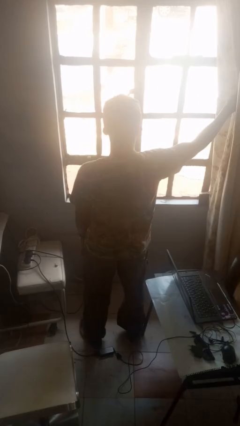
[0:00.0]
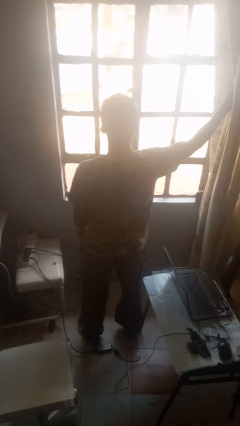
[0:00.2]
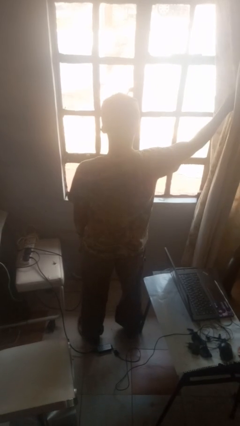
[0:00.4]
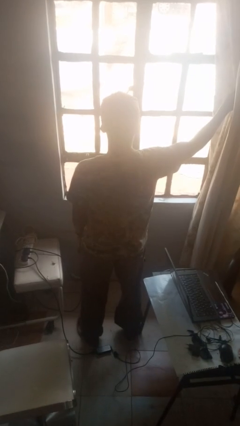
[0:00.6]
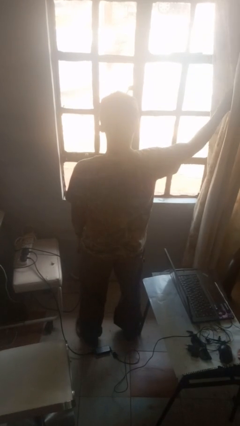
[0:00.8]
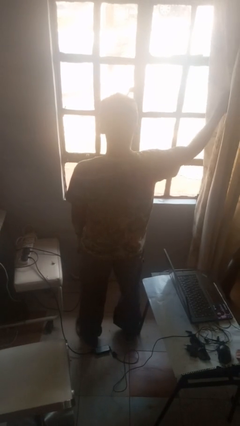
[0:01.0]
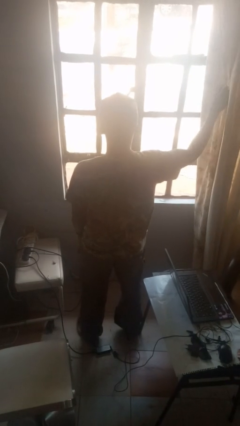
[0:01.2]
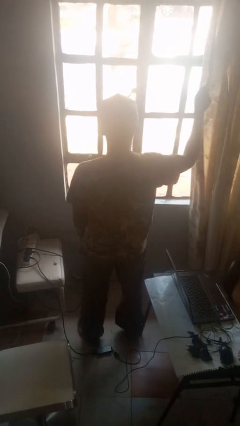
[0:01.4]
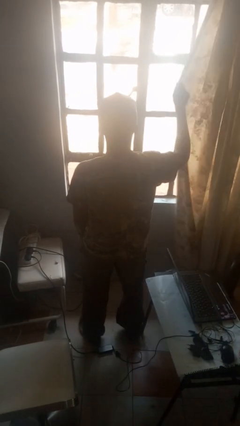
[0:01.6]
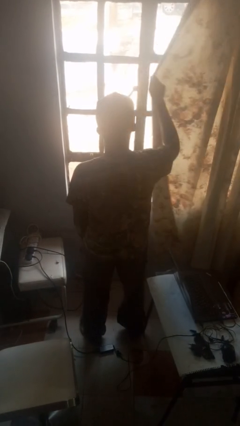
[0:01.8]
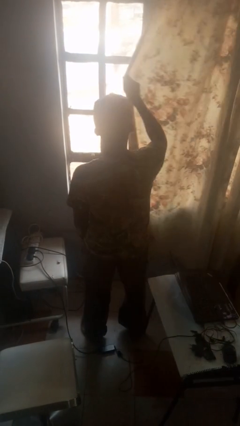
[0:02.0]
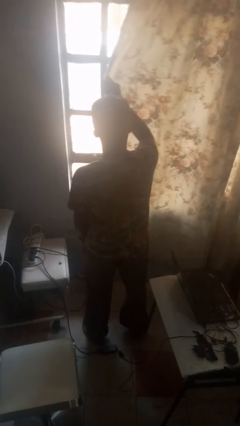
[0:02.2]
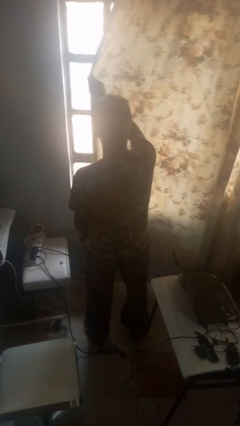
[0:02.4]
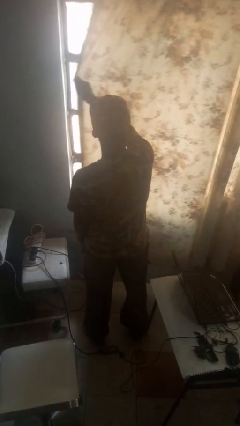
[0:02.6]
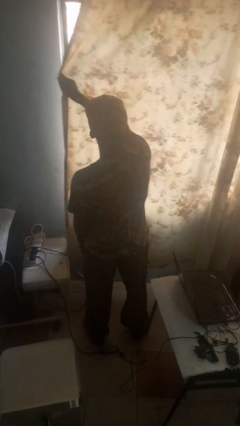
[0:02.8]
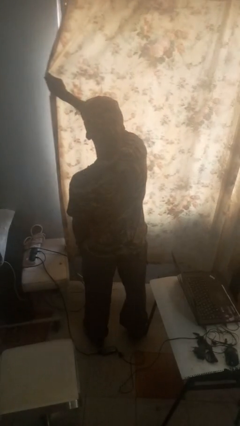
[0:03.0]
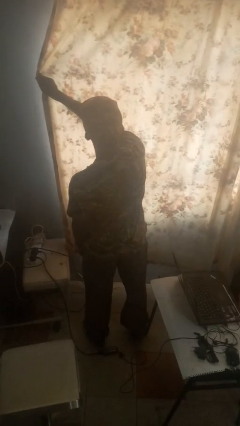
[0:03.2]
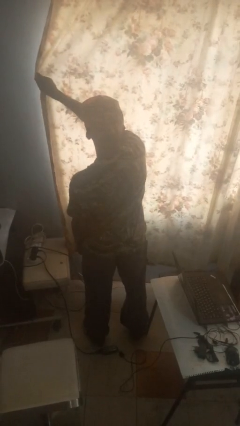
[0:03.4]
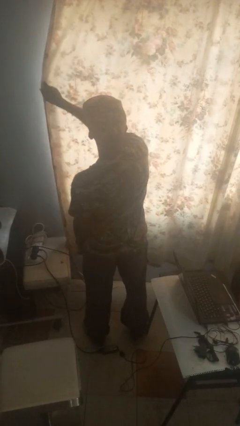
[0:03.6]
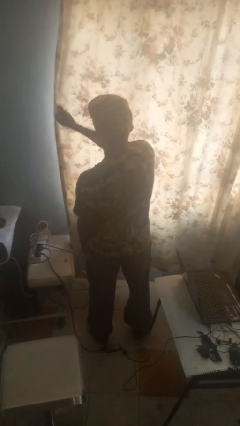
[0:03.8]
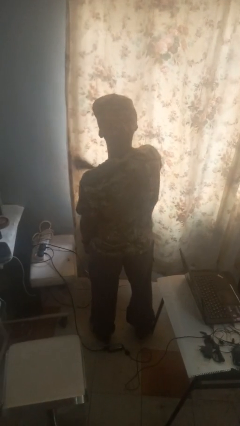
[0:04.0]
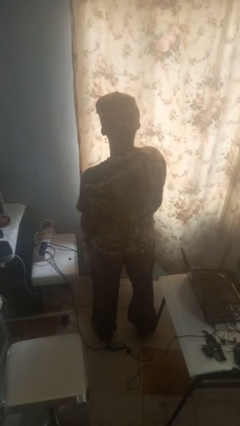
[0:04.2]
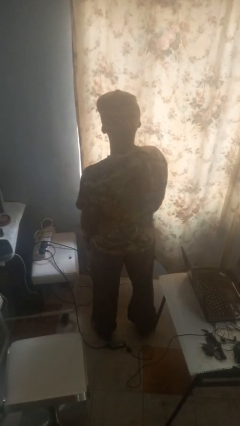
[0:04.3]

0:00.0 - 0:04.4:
person closes curtains

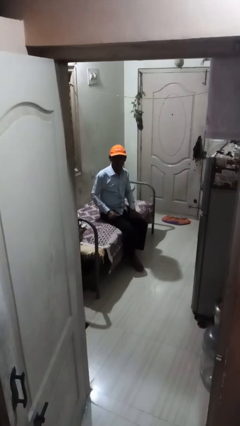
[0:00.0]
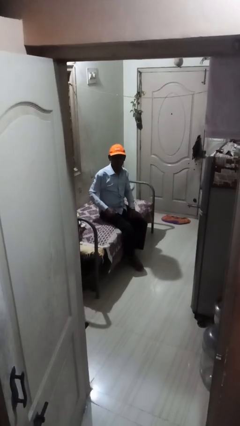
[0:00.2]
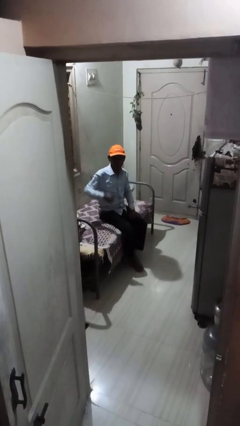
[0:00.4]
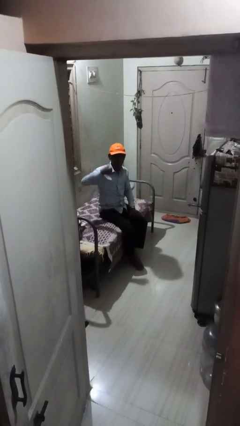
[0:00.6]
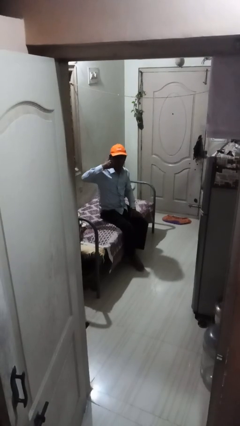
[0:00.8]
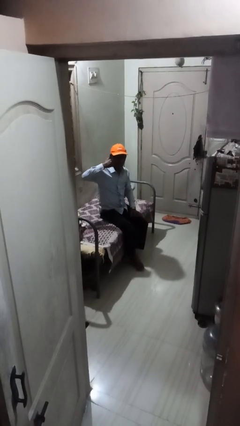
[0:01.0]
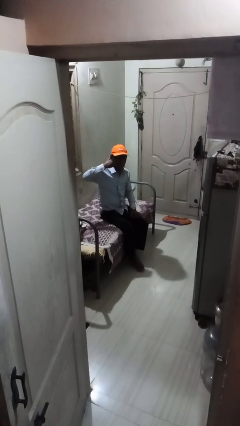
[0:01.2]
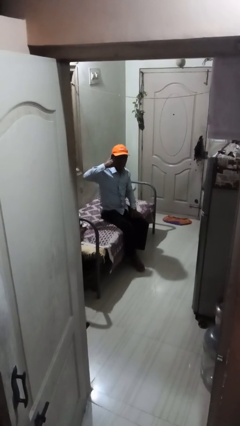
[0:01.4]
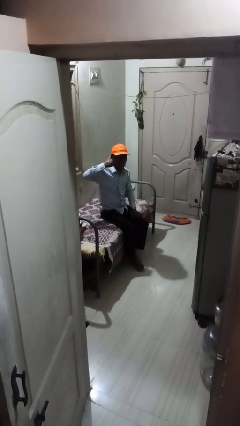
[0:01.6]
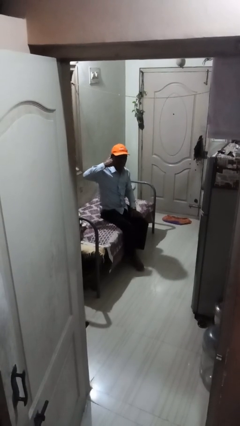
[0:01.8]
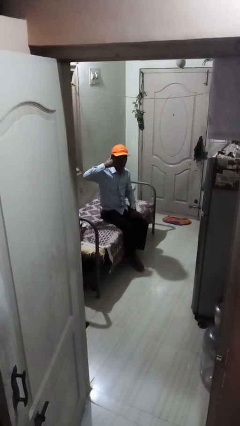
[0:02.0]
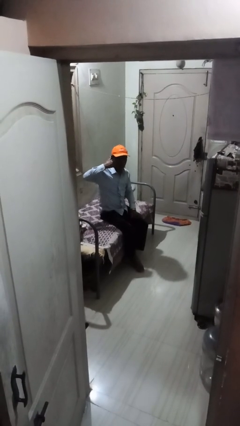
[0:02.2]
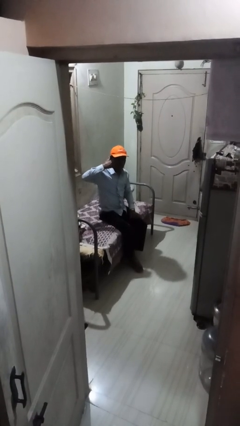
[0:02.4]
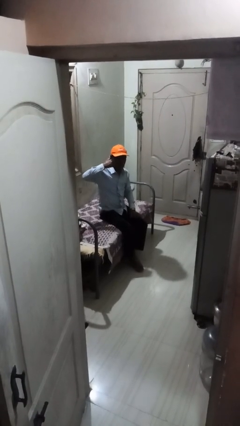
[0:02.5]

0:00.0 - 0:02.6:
person gestures call me

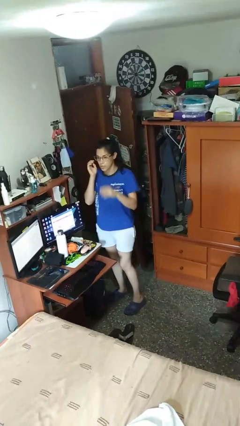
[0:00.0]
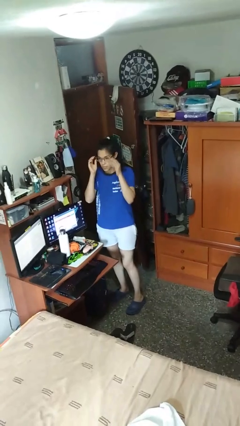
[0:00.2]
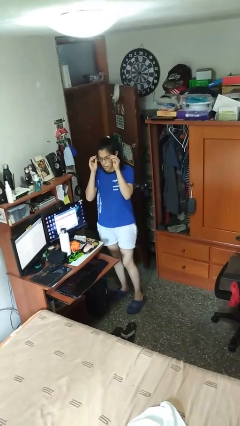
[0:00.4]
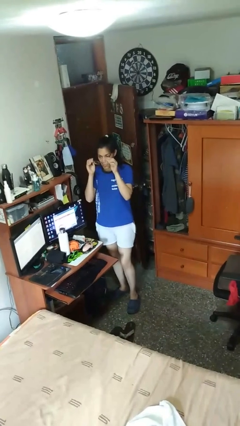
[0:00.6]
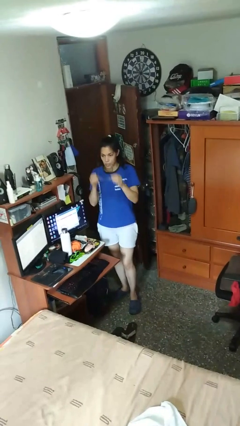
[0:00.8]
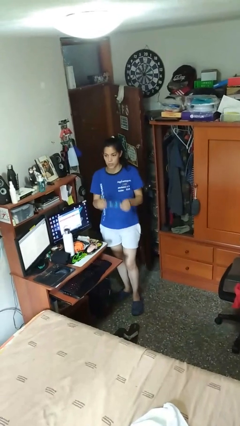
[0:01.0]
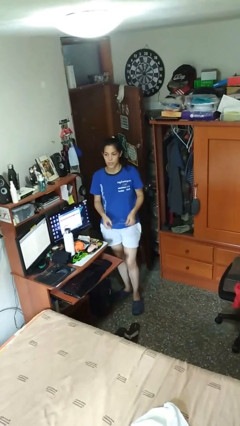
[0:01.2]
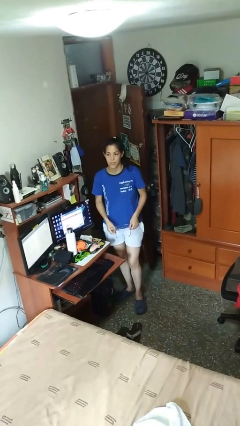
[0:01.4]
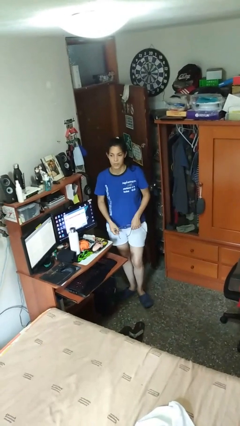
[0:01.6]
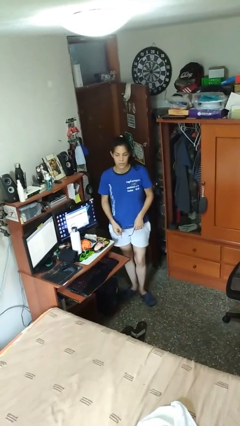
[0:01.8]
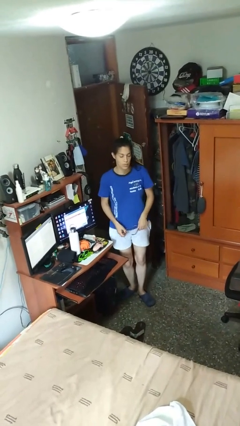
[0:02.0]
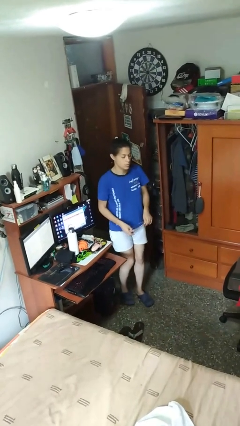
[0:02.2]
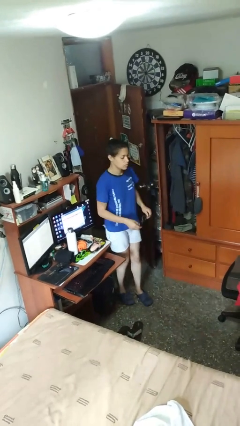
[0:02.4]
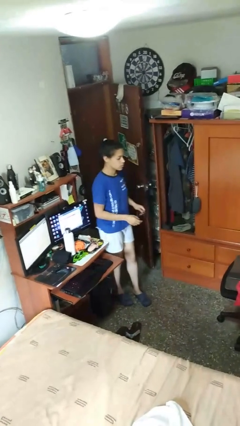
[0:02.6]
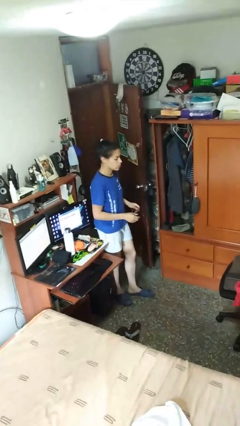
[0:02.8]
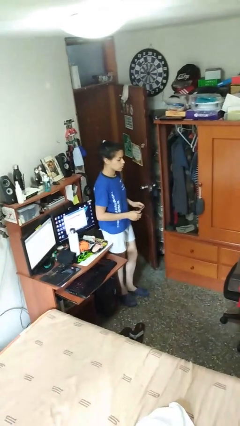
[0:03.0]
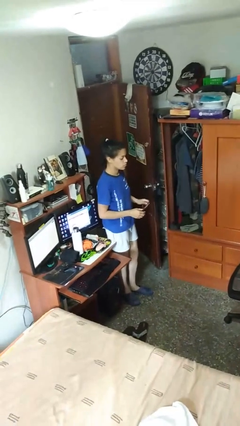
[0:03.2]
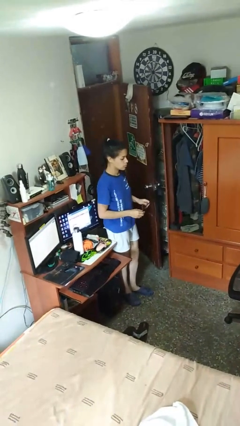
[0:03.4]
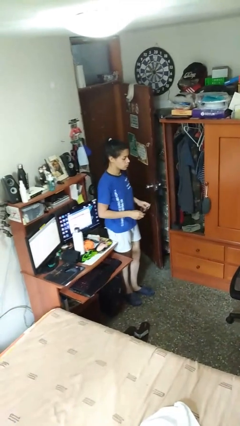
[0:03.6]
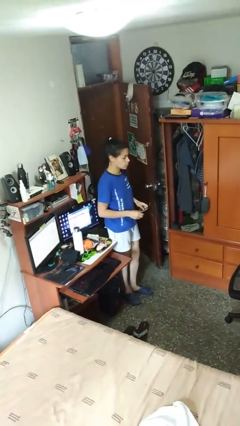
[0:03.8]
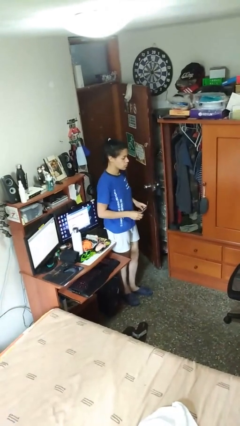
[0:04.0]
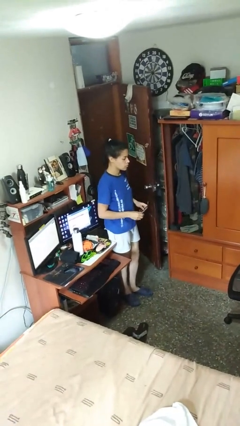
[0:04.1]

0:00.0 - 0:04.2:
person takes off glasses

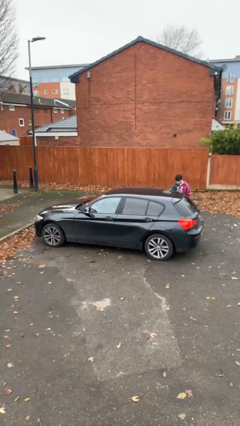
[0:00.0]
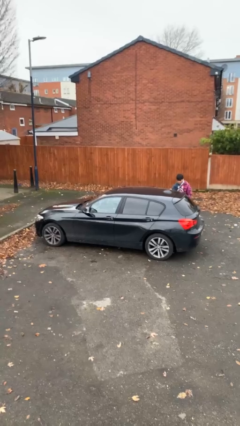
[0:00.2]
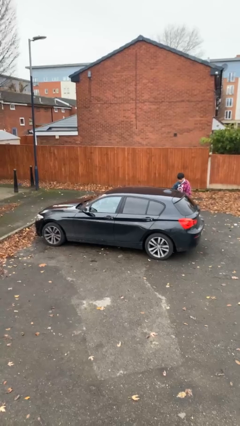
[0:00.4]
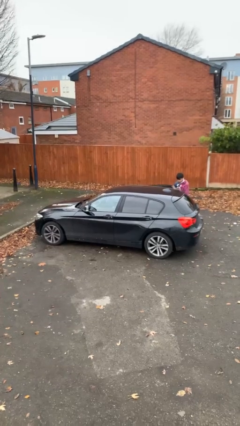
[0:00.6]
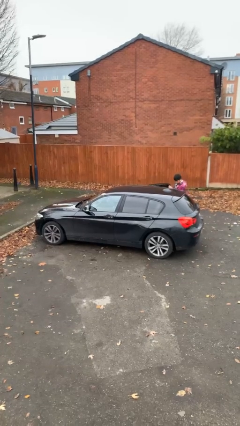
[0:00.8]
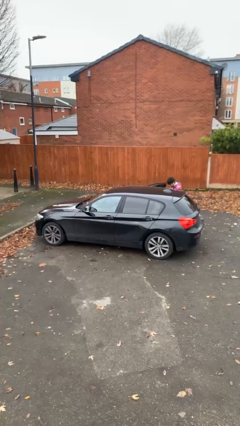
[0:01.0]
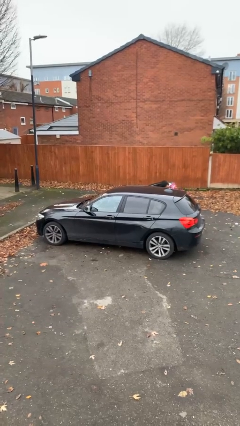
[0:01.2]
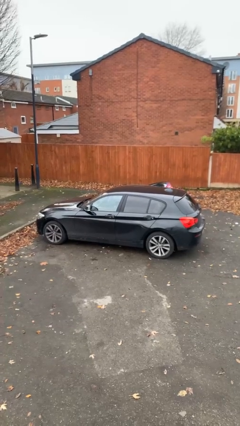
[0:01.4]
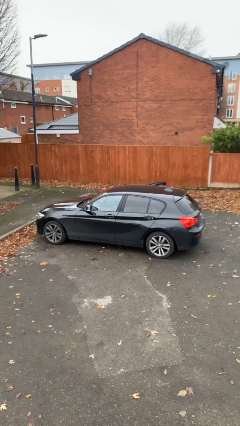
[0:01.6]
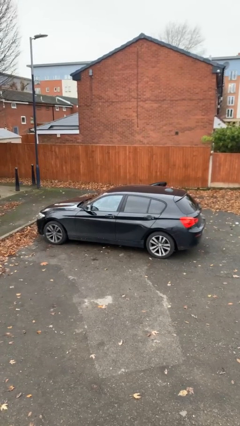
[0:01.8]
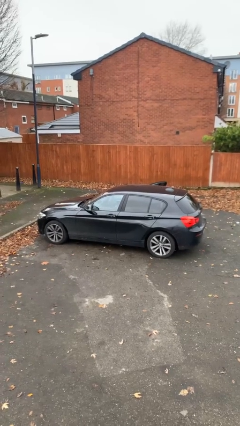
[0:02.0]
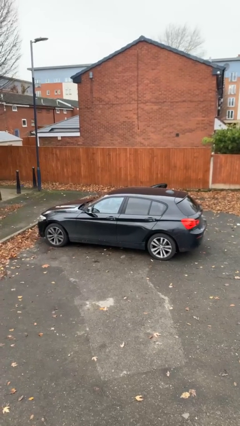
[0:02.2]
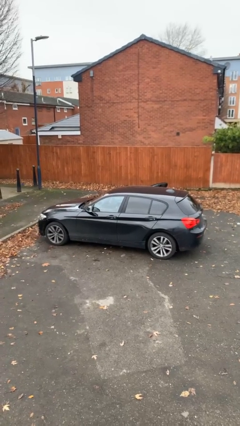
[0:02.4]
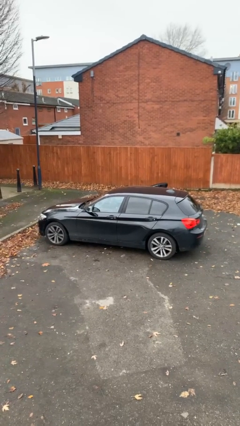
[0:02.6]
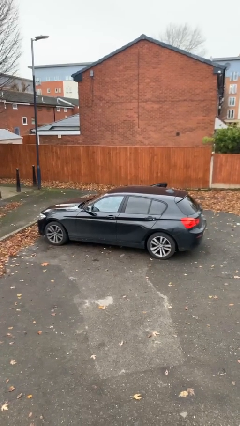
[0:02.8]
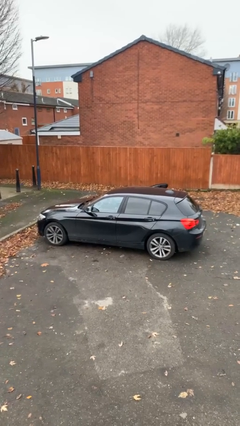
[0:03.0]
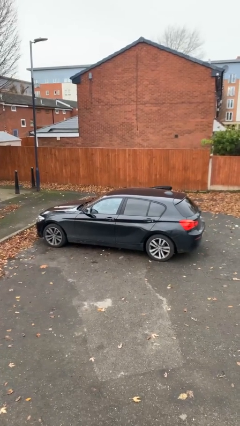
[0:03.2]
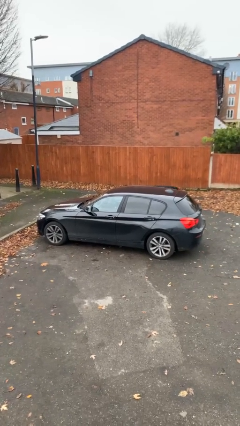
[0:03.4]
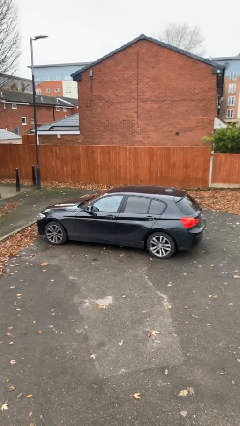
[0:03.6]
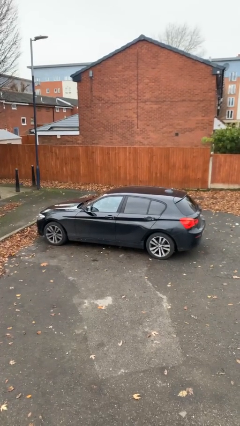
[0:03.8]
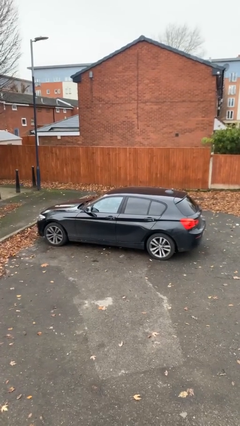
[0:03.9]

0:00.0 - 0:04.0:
car picks up person

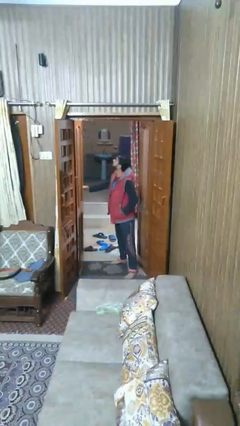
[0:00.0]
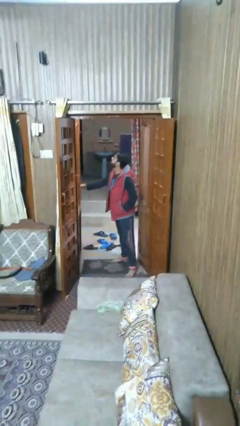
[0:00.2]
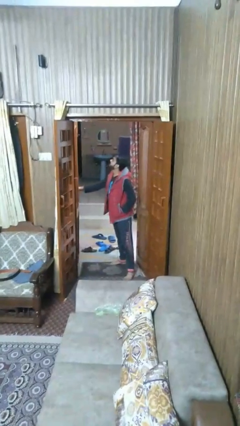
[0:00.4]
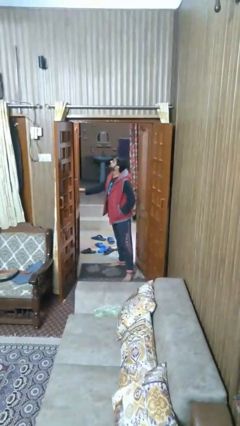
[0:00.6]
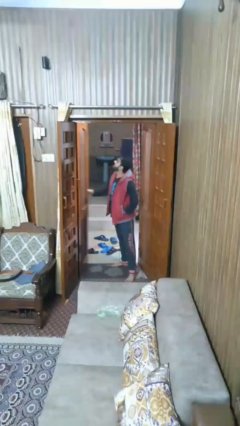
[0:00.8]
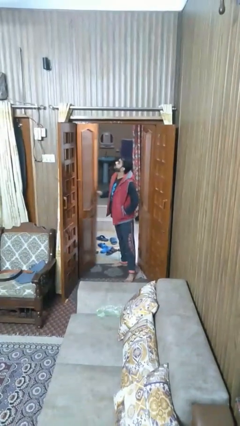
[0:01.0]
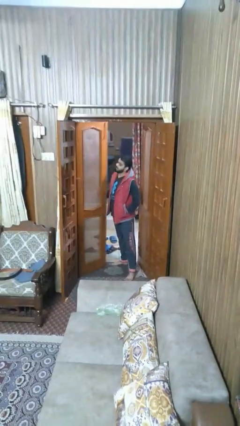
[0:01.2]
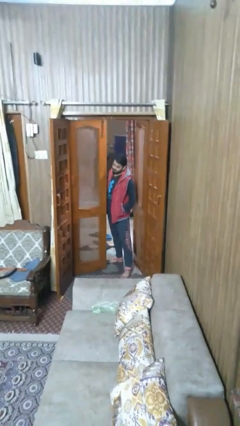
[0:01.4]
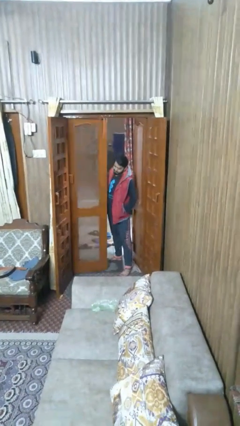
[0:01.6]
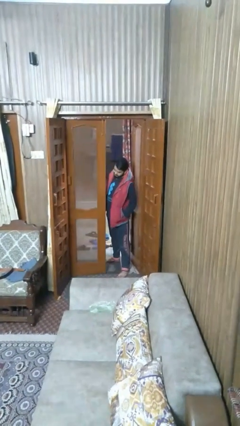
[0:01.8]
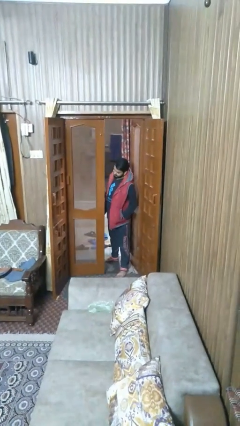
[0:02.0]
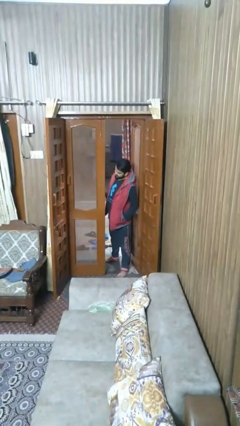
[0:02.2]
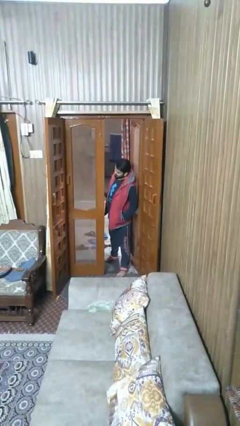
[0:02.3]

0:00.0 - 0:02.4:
person opens facility door
